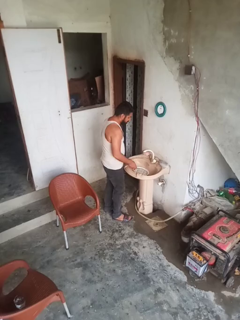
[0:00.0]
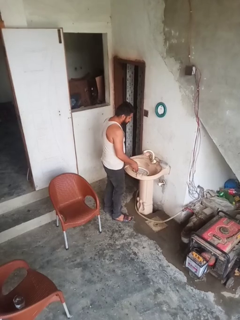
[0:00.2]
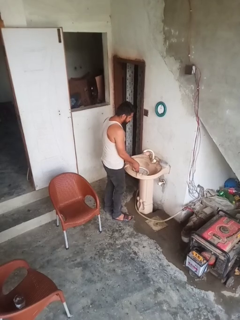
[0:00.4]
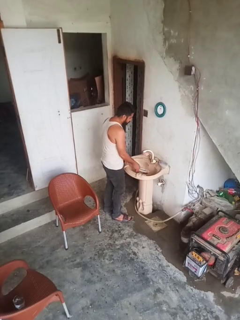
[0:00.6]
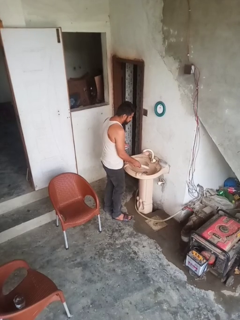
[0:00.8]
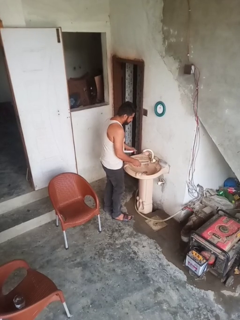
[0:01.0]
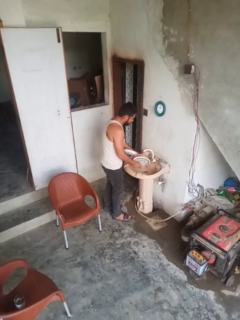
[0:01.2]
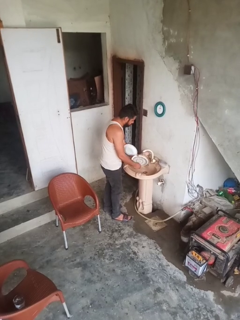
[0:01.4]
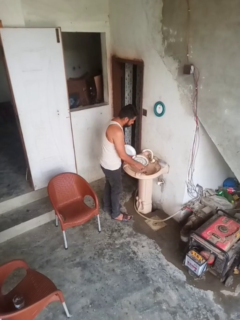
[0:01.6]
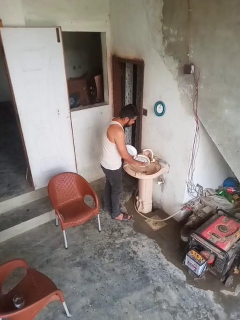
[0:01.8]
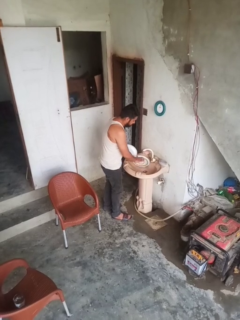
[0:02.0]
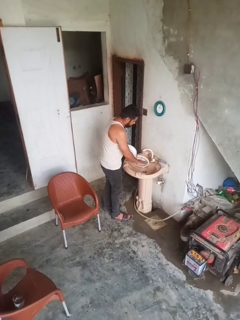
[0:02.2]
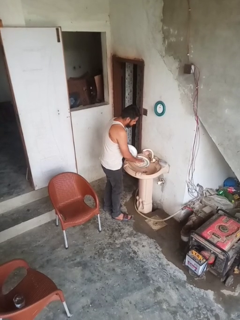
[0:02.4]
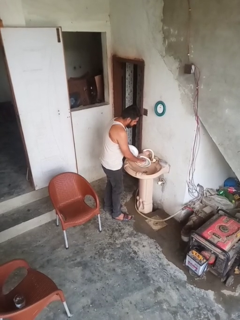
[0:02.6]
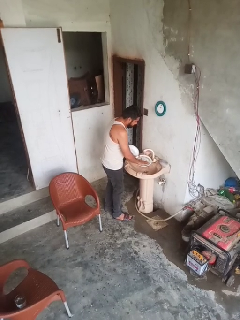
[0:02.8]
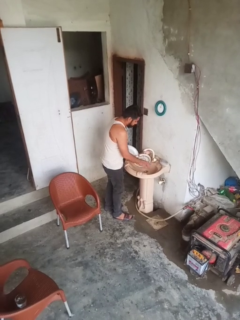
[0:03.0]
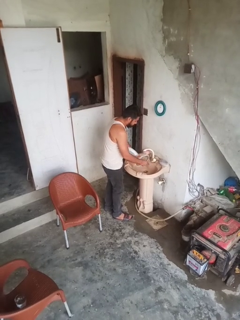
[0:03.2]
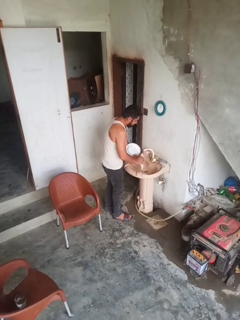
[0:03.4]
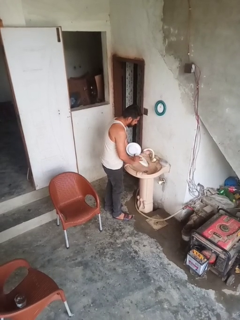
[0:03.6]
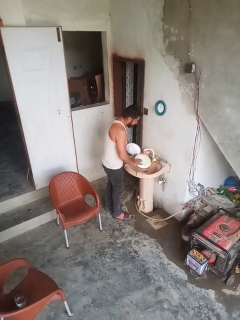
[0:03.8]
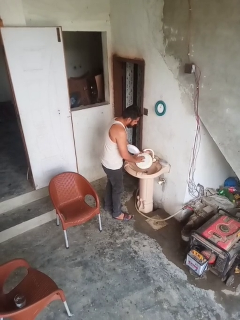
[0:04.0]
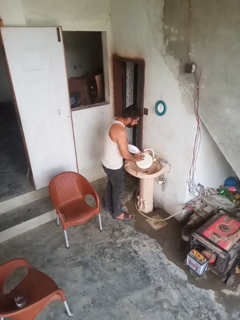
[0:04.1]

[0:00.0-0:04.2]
person washes dish

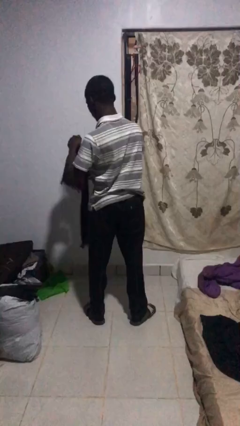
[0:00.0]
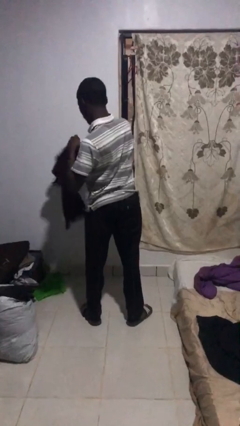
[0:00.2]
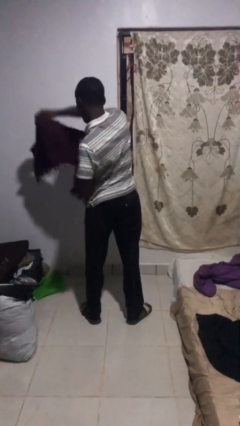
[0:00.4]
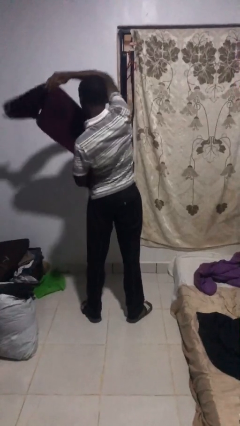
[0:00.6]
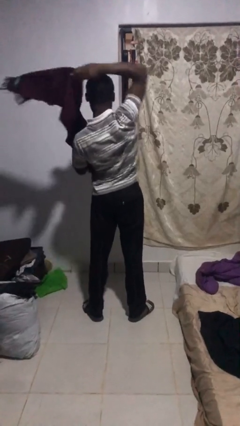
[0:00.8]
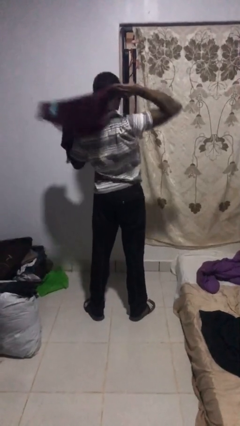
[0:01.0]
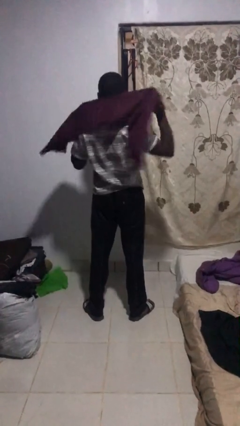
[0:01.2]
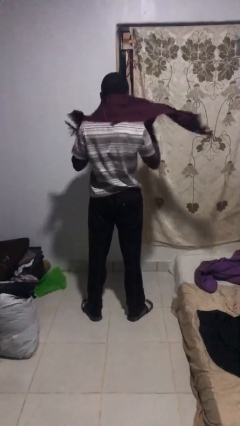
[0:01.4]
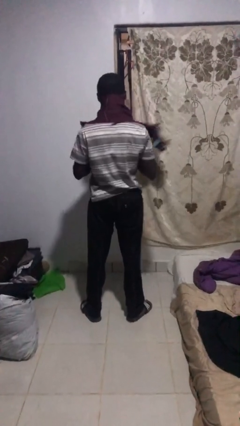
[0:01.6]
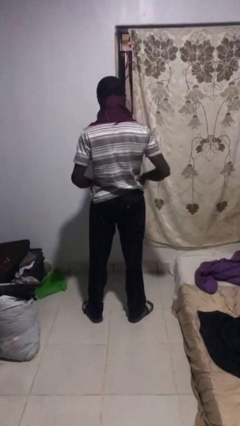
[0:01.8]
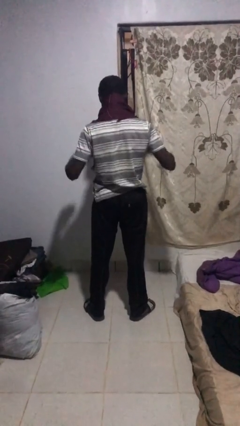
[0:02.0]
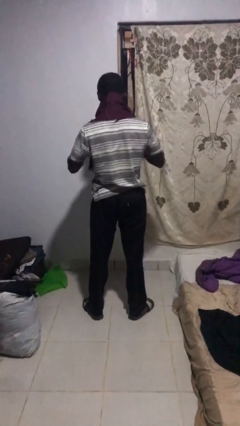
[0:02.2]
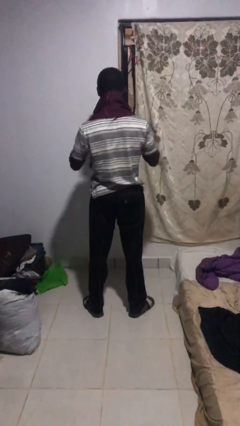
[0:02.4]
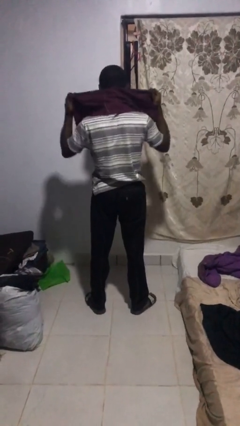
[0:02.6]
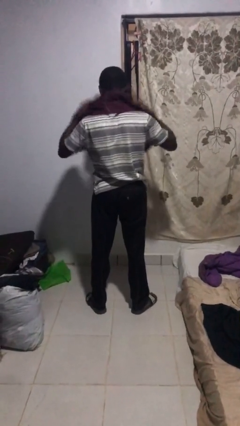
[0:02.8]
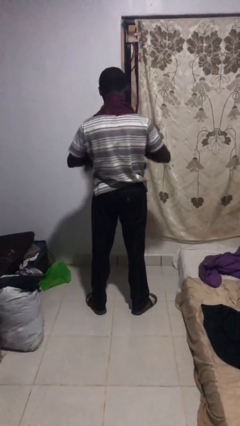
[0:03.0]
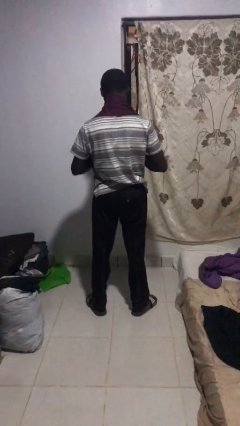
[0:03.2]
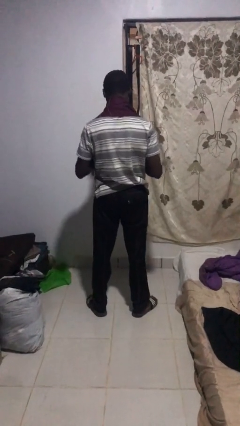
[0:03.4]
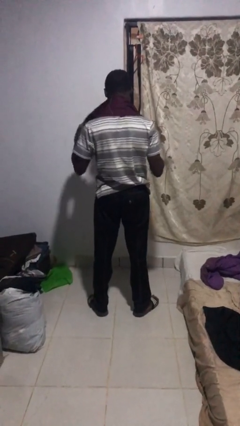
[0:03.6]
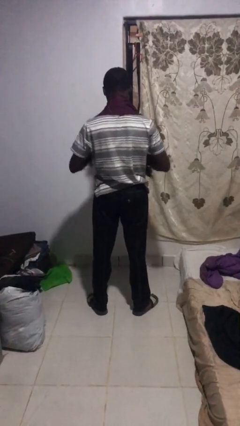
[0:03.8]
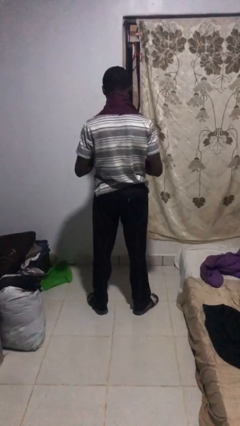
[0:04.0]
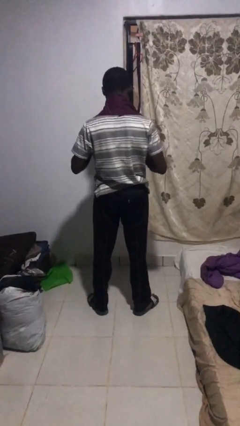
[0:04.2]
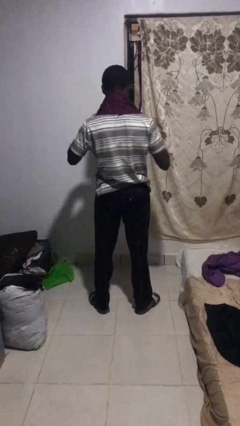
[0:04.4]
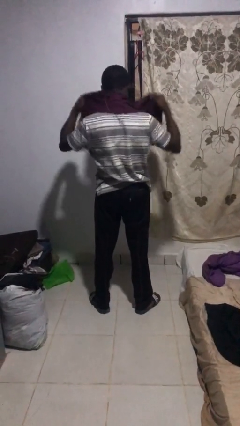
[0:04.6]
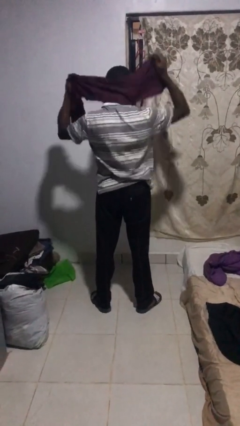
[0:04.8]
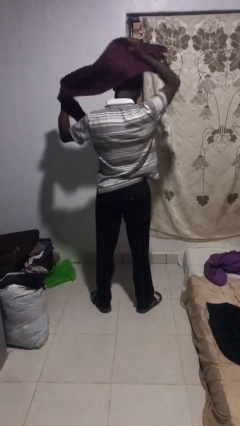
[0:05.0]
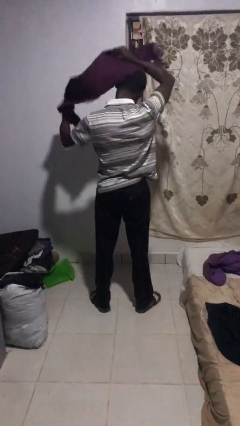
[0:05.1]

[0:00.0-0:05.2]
person puts on scarf

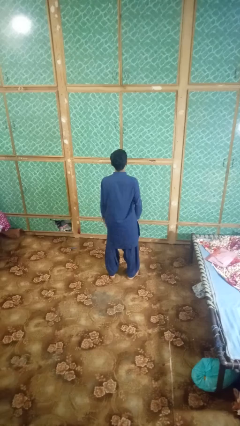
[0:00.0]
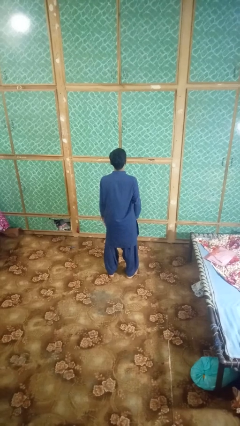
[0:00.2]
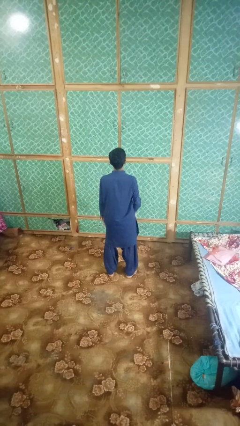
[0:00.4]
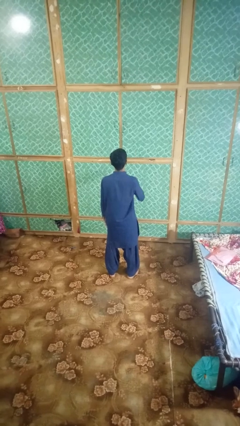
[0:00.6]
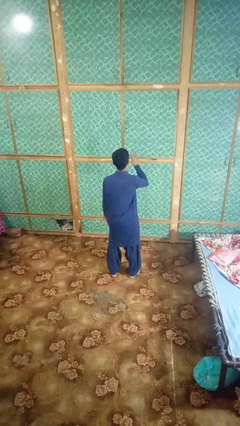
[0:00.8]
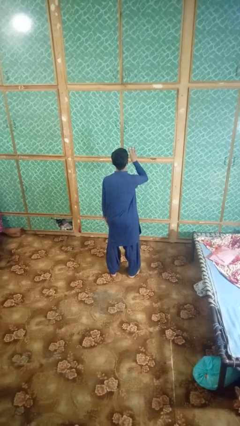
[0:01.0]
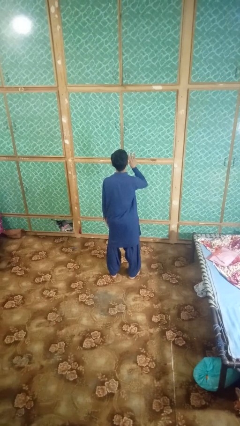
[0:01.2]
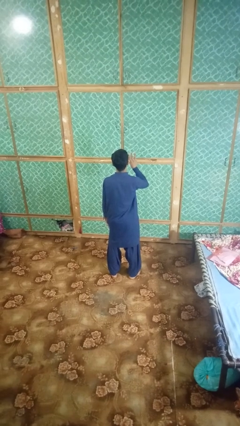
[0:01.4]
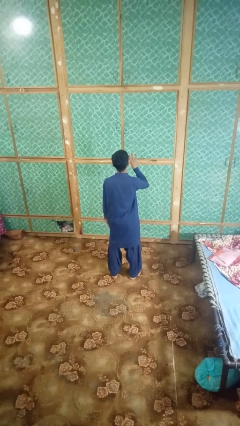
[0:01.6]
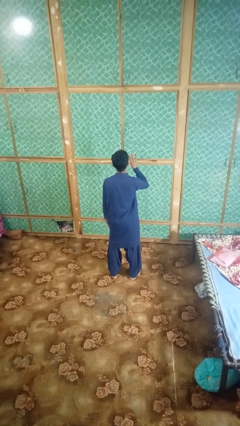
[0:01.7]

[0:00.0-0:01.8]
person gestures number three

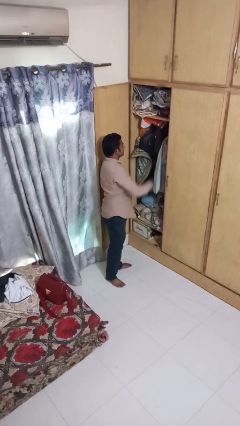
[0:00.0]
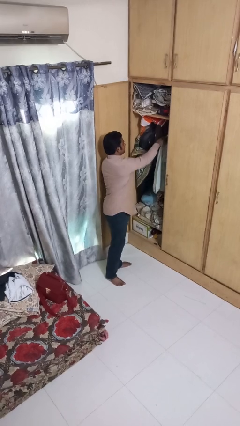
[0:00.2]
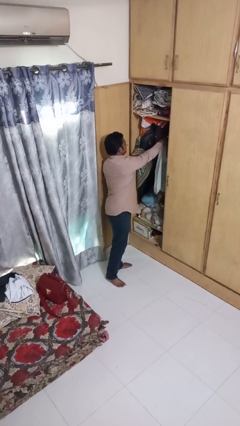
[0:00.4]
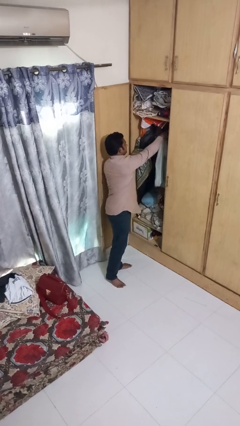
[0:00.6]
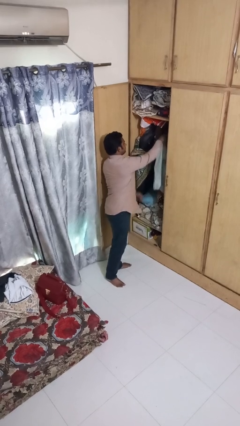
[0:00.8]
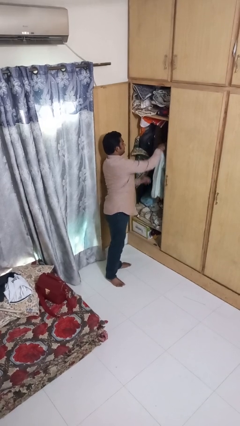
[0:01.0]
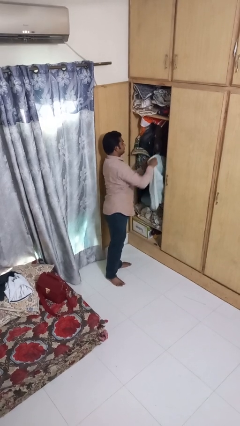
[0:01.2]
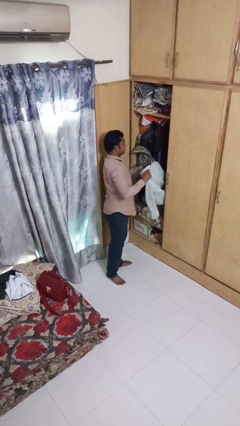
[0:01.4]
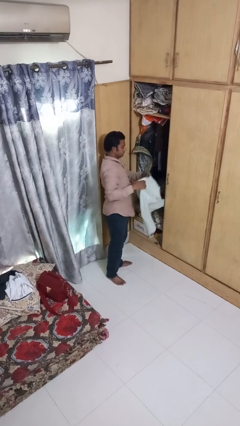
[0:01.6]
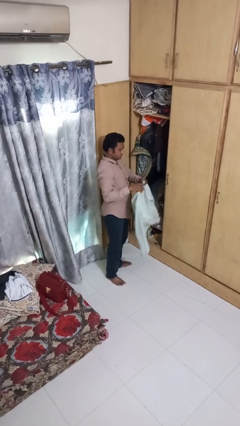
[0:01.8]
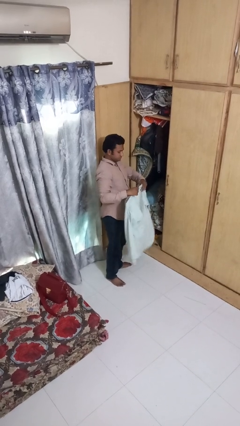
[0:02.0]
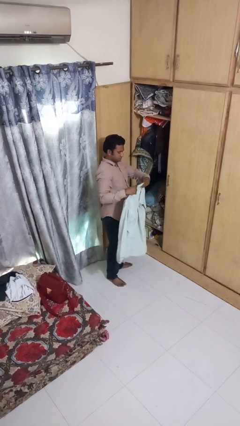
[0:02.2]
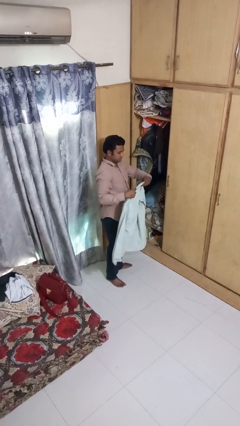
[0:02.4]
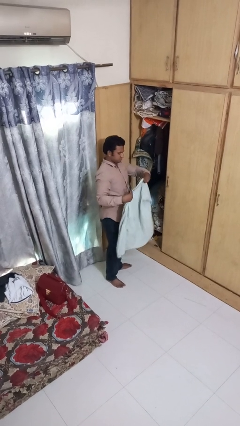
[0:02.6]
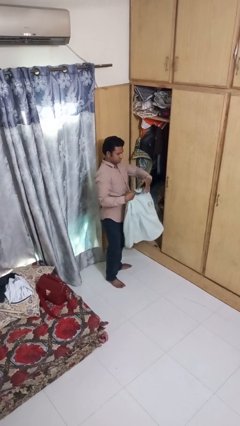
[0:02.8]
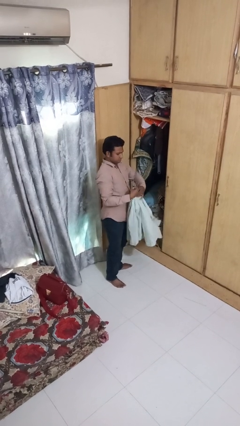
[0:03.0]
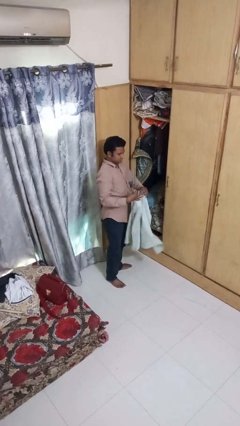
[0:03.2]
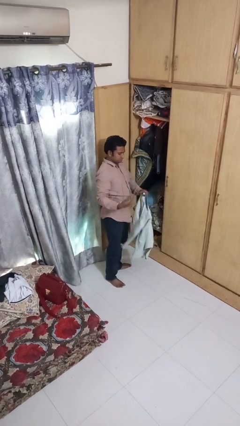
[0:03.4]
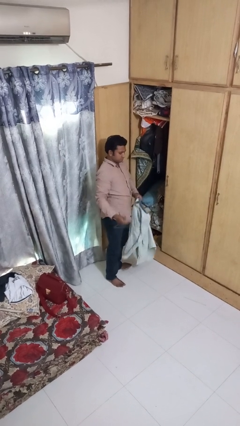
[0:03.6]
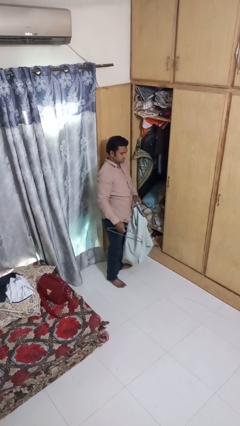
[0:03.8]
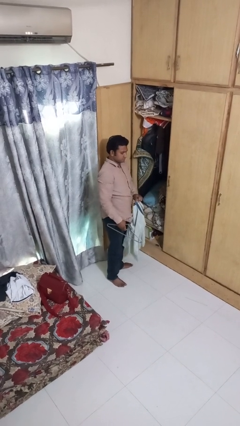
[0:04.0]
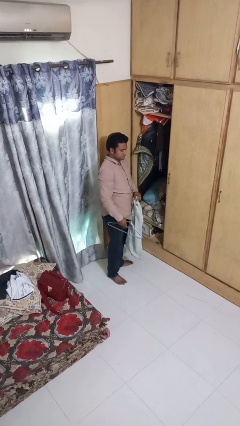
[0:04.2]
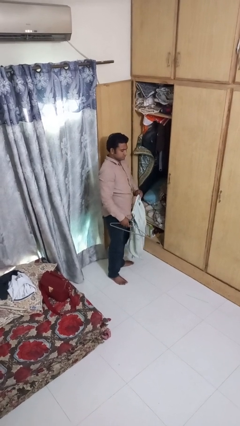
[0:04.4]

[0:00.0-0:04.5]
person takes clothes from closet

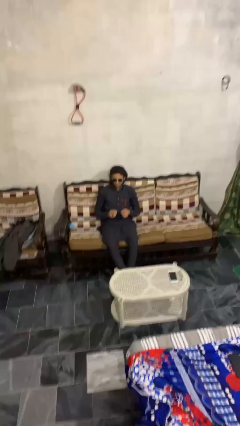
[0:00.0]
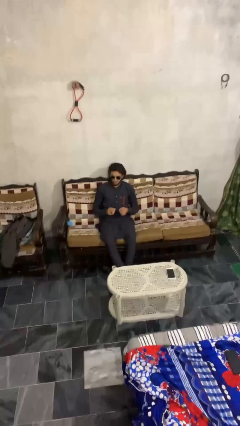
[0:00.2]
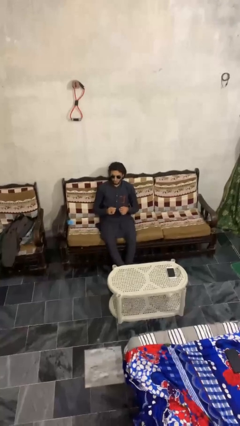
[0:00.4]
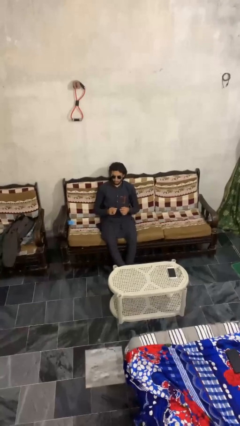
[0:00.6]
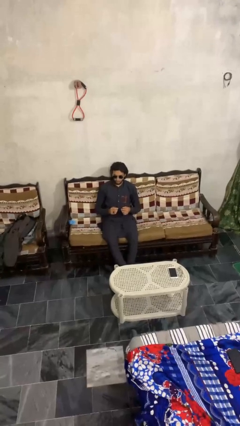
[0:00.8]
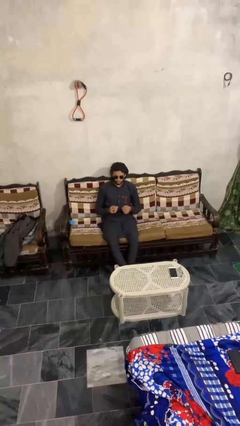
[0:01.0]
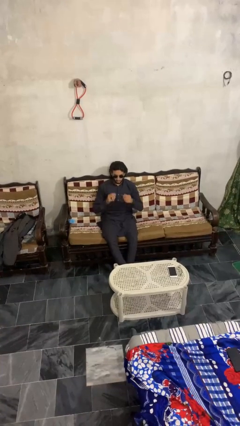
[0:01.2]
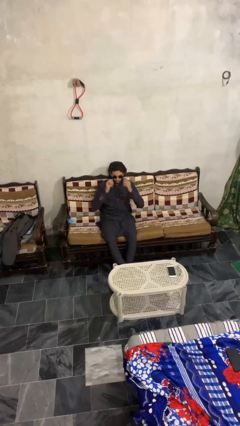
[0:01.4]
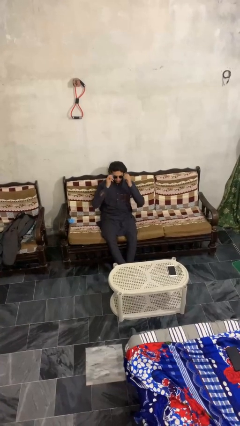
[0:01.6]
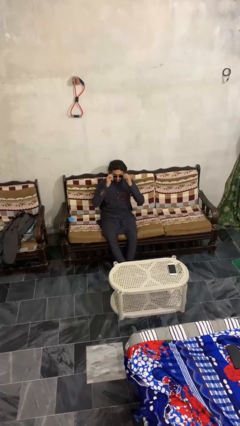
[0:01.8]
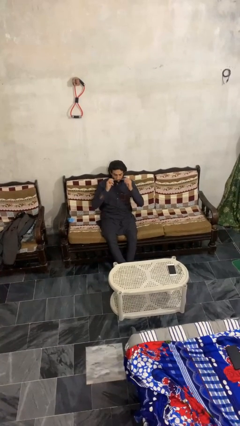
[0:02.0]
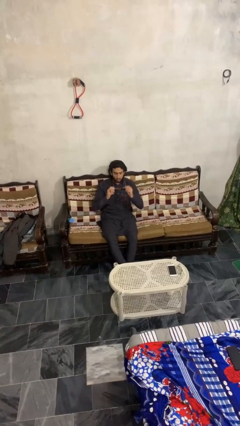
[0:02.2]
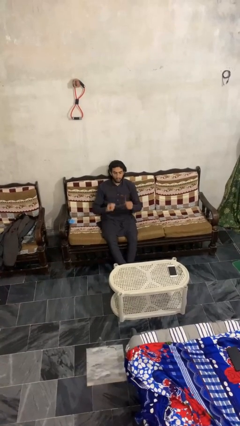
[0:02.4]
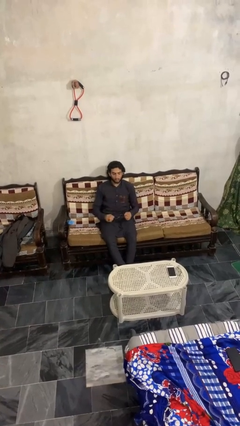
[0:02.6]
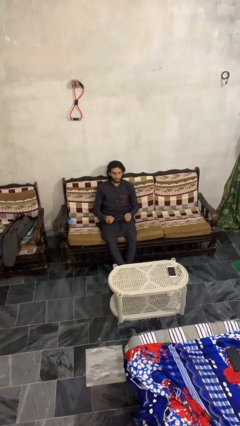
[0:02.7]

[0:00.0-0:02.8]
person takes off sunglasses
